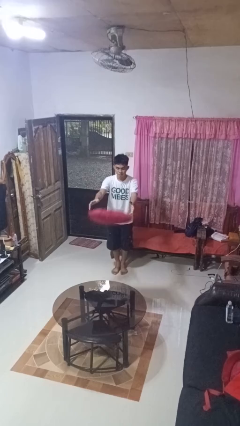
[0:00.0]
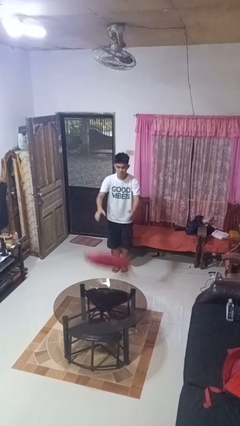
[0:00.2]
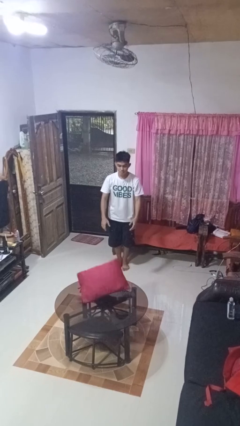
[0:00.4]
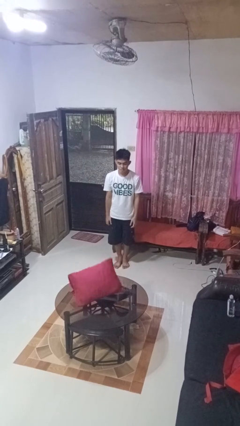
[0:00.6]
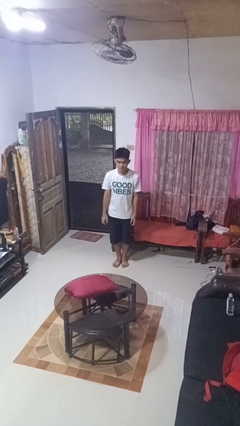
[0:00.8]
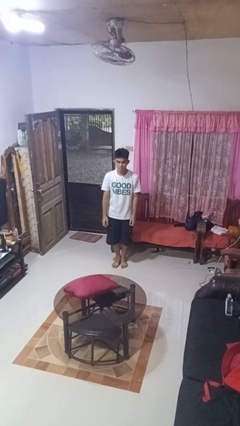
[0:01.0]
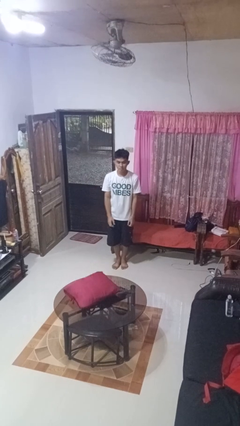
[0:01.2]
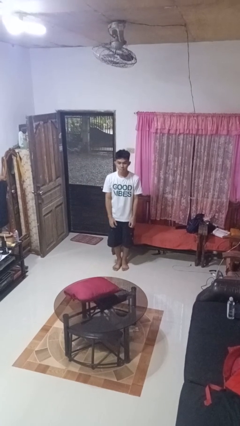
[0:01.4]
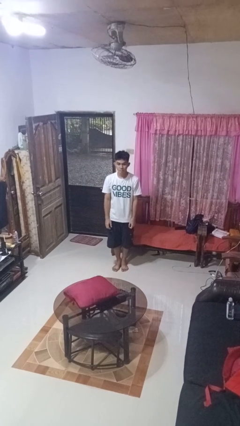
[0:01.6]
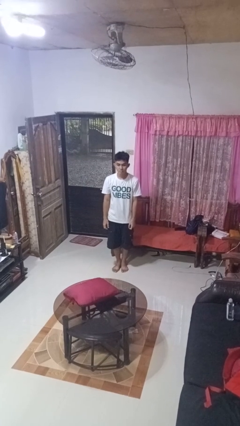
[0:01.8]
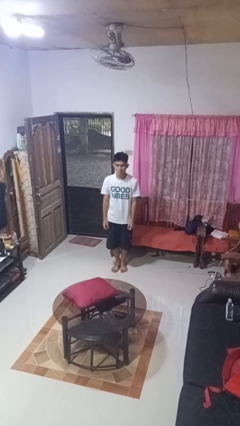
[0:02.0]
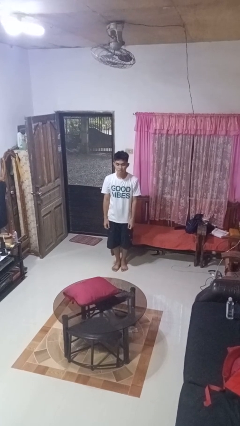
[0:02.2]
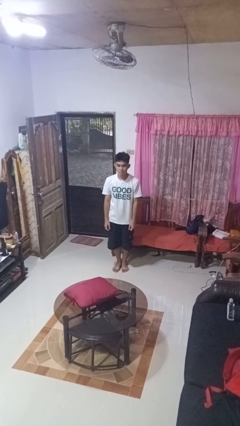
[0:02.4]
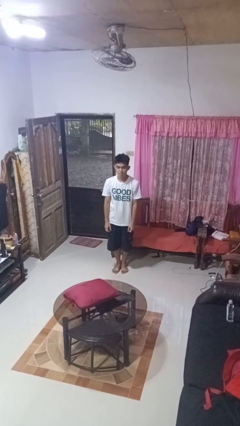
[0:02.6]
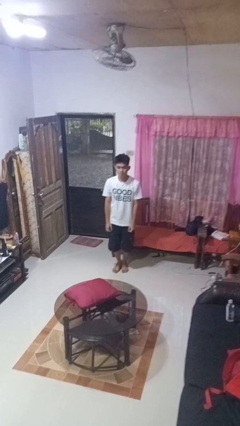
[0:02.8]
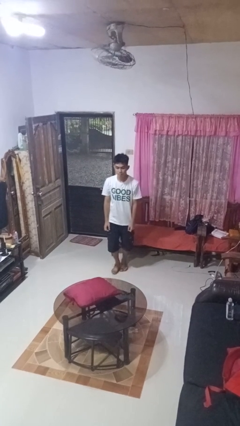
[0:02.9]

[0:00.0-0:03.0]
person throws object on table

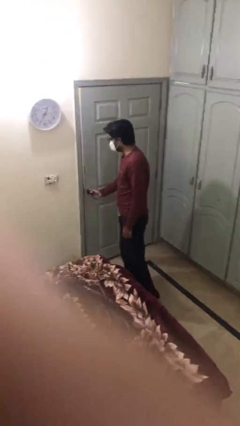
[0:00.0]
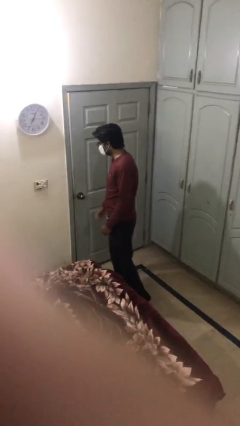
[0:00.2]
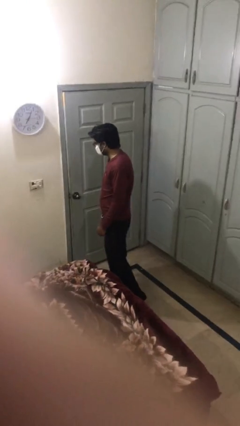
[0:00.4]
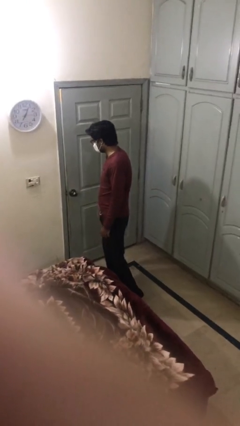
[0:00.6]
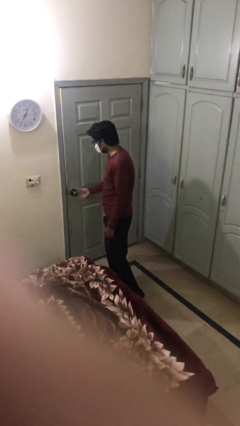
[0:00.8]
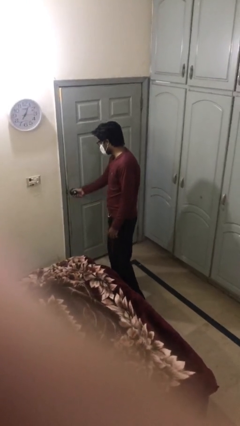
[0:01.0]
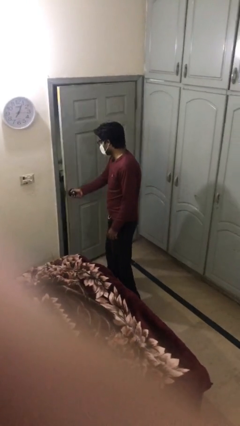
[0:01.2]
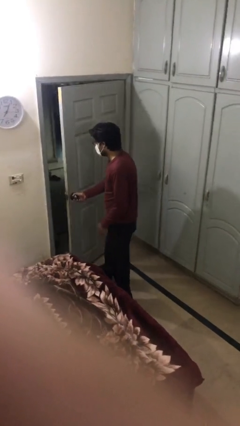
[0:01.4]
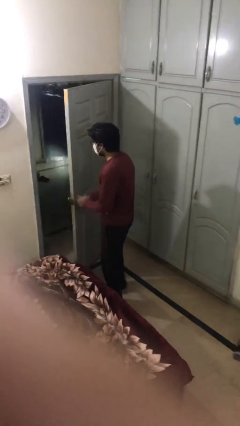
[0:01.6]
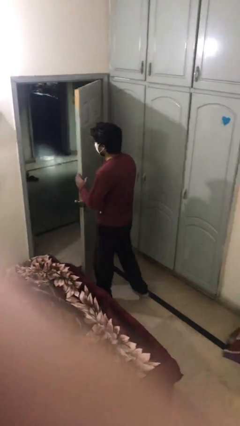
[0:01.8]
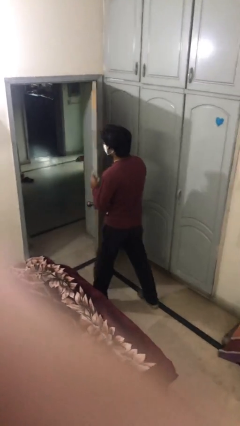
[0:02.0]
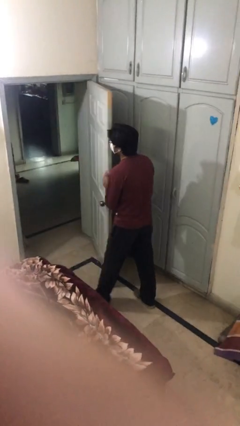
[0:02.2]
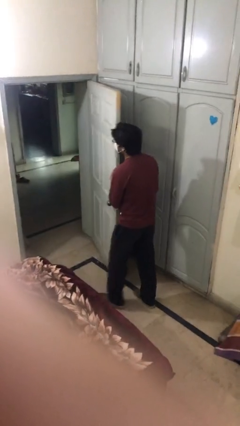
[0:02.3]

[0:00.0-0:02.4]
person opens facility door

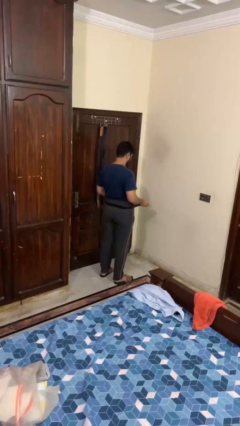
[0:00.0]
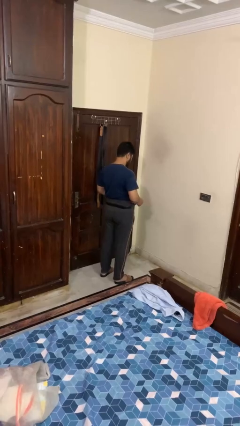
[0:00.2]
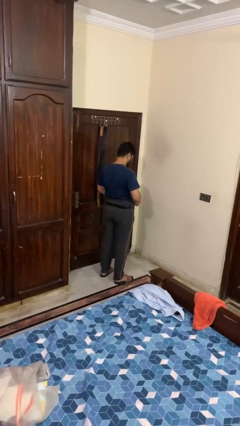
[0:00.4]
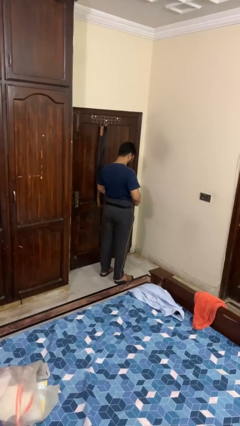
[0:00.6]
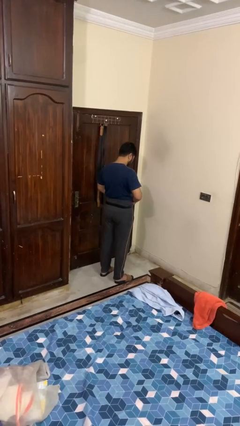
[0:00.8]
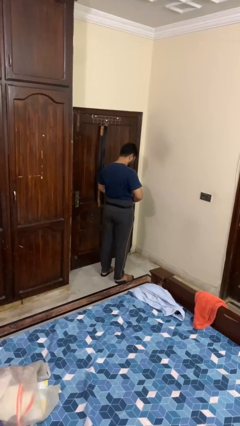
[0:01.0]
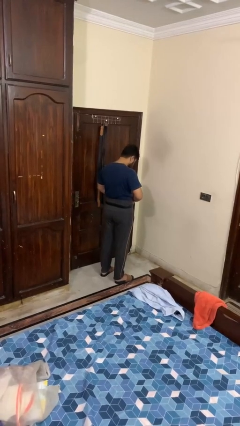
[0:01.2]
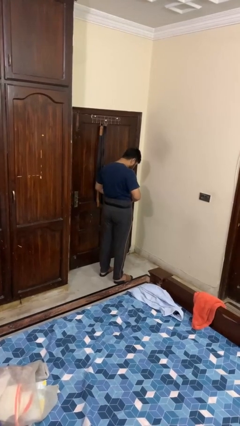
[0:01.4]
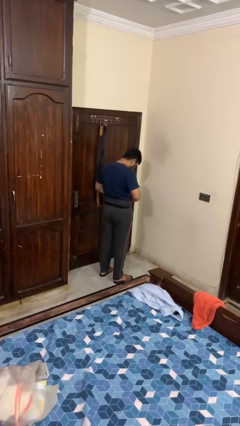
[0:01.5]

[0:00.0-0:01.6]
person puts on belt

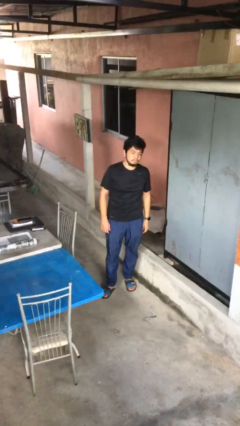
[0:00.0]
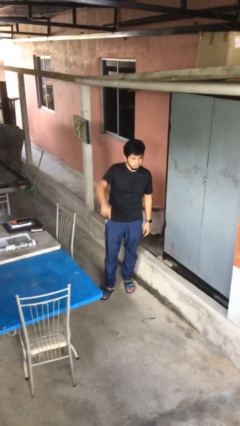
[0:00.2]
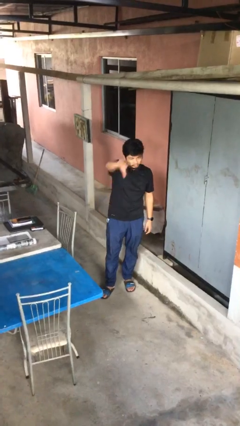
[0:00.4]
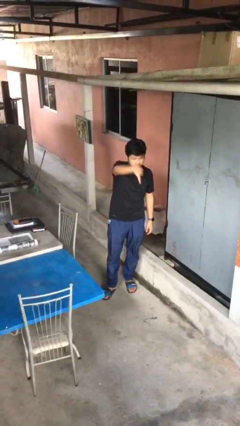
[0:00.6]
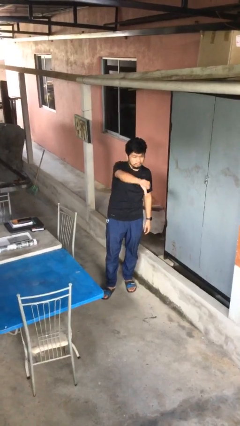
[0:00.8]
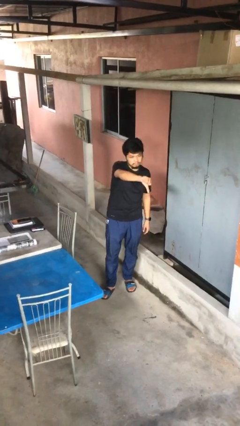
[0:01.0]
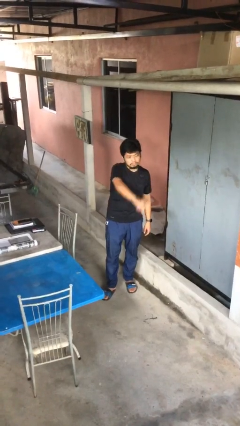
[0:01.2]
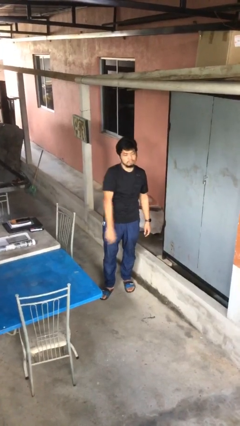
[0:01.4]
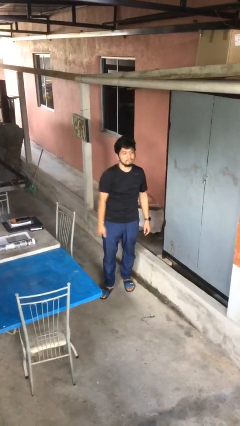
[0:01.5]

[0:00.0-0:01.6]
person gestures thumbs down

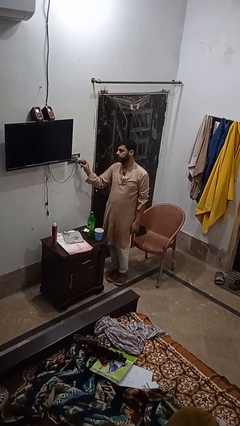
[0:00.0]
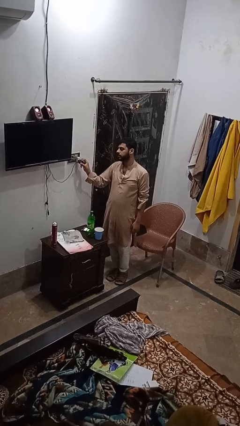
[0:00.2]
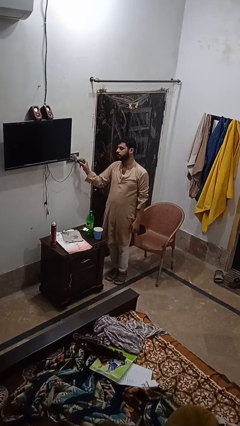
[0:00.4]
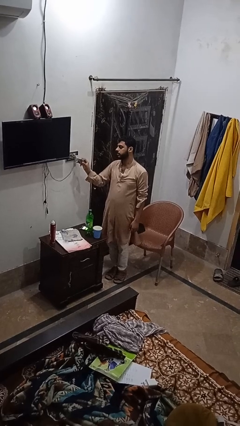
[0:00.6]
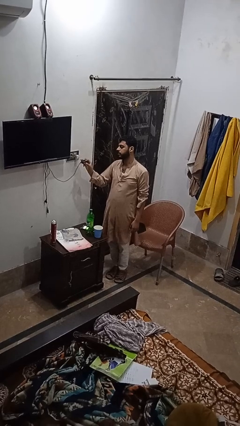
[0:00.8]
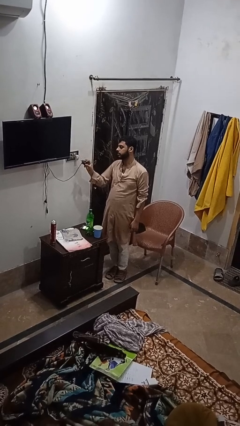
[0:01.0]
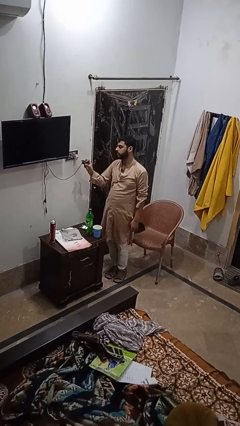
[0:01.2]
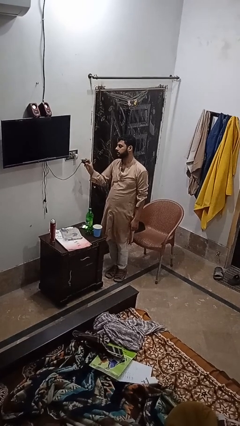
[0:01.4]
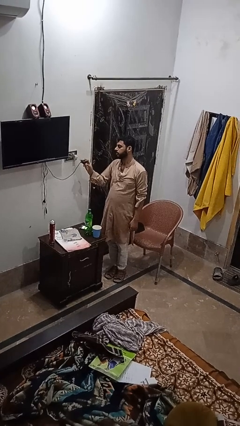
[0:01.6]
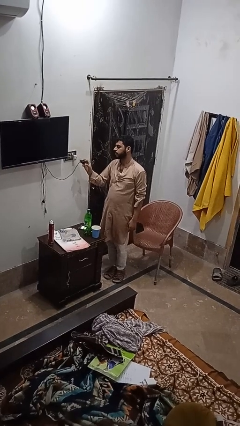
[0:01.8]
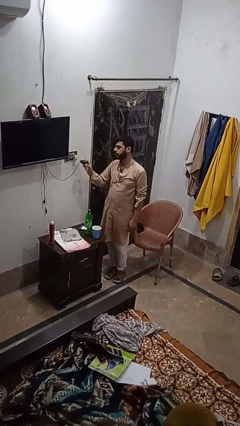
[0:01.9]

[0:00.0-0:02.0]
person unplugs from electrical socket

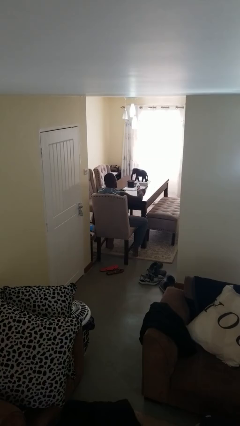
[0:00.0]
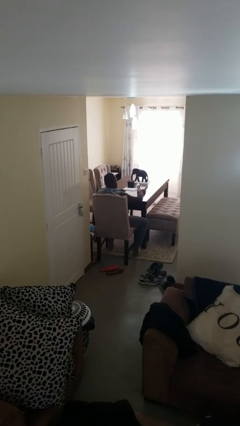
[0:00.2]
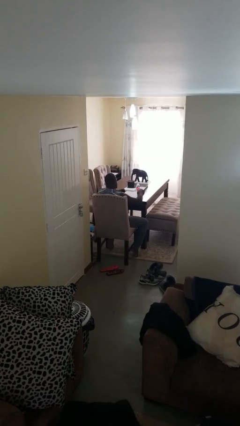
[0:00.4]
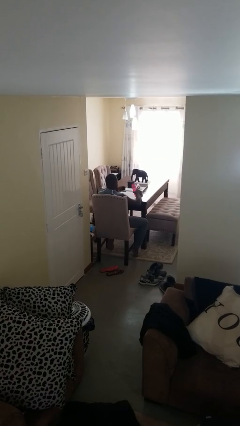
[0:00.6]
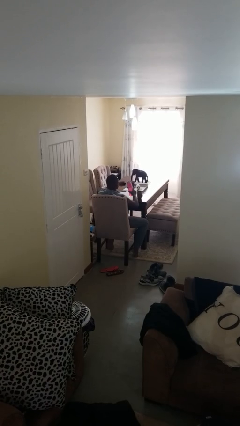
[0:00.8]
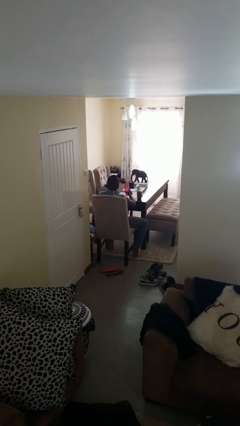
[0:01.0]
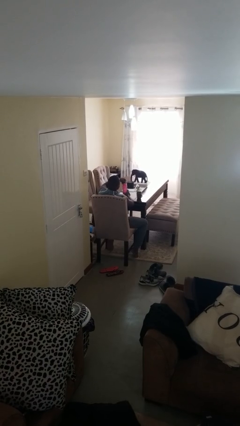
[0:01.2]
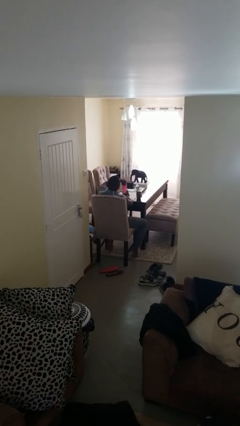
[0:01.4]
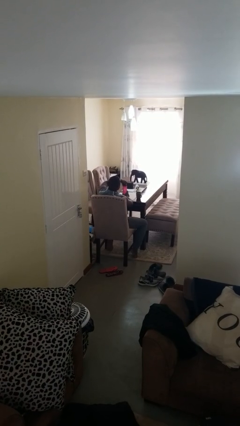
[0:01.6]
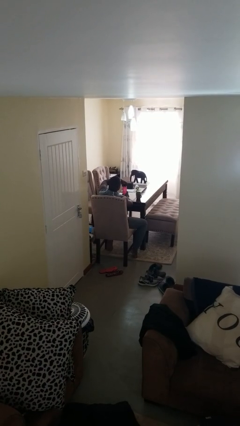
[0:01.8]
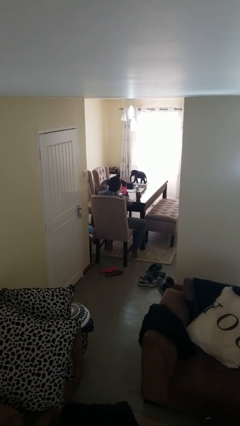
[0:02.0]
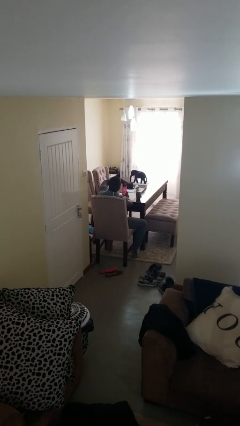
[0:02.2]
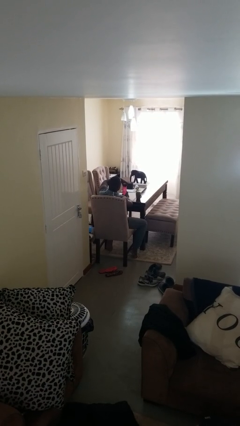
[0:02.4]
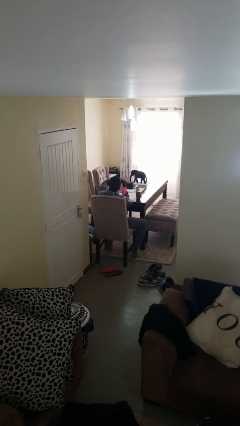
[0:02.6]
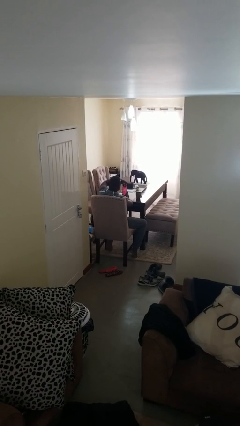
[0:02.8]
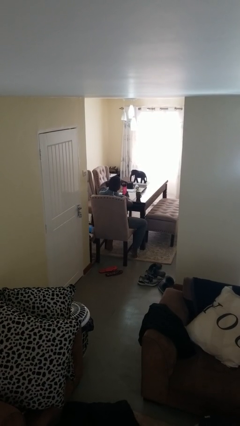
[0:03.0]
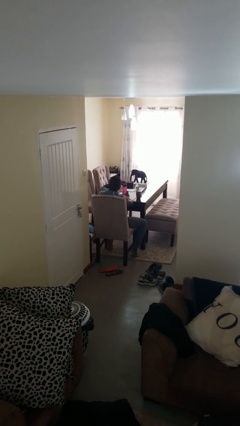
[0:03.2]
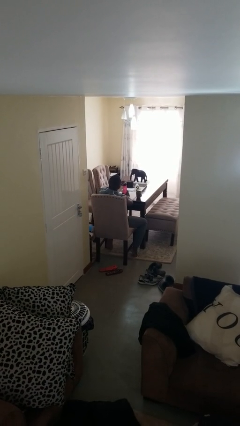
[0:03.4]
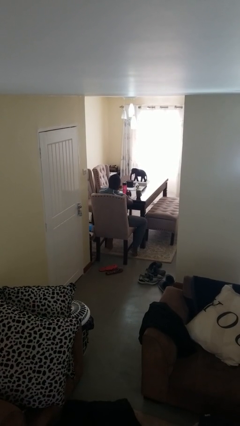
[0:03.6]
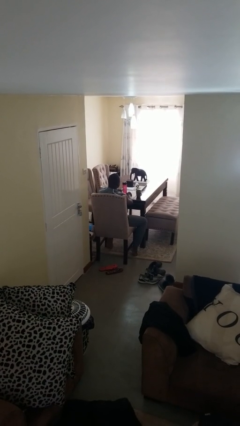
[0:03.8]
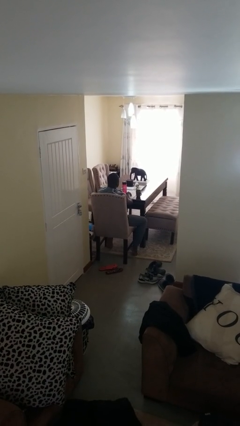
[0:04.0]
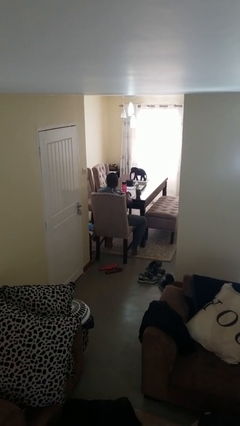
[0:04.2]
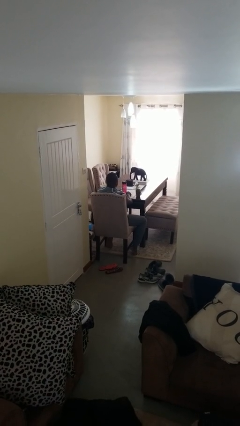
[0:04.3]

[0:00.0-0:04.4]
person screws lid to bottle

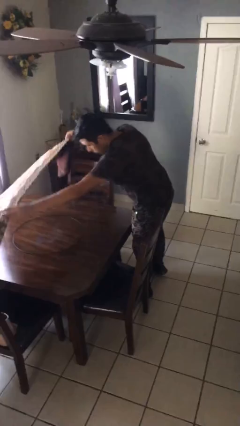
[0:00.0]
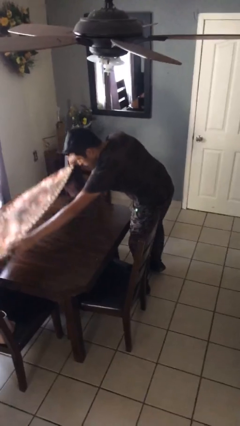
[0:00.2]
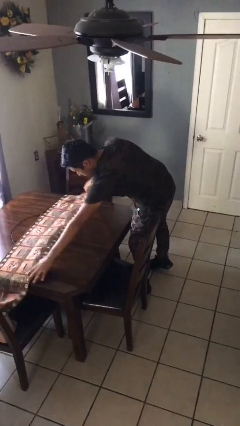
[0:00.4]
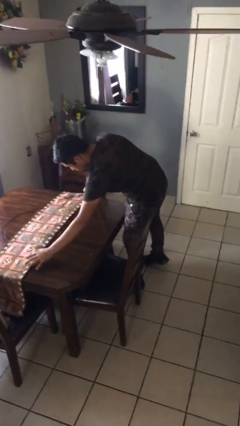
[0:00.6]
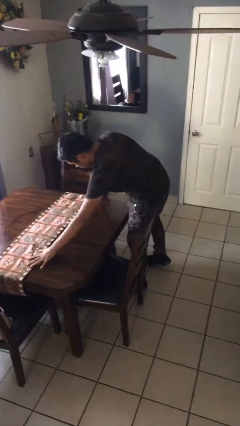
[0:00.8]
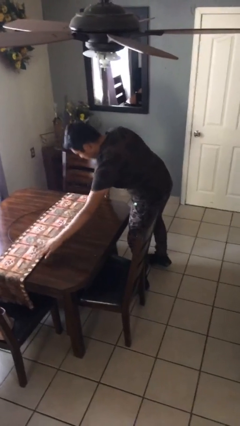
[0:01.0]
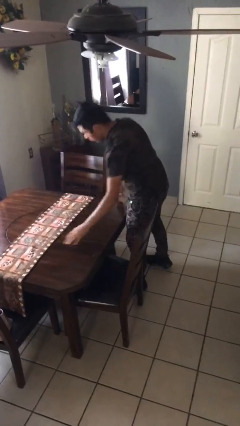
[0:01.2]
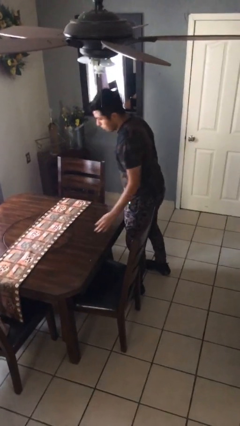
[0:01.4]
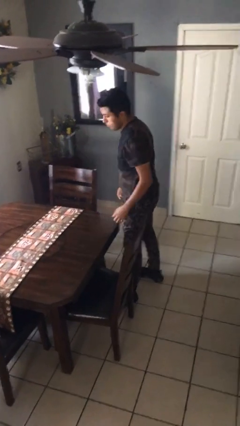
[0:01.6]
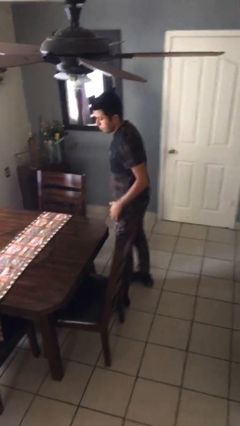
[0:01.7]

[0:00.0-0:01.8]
person spreads tablecloth

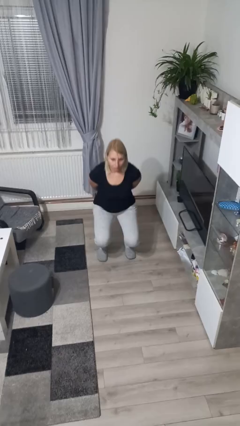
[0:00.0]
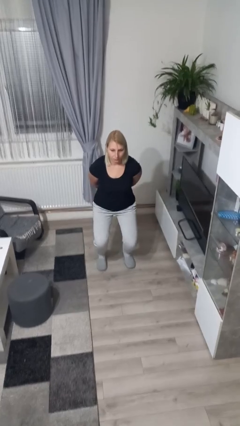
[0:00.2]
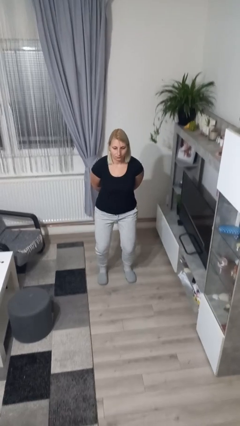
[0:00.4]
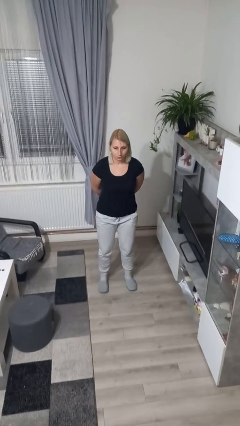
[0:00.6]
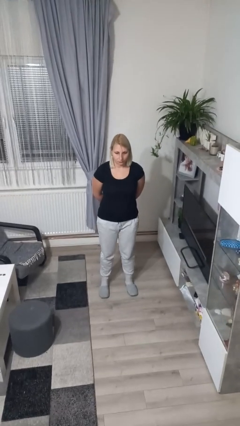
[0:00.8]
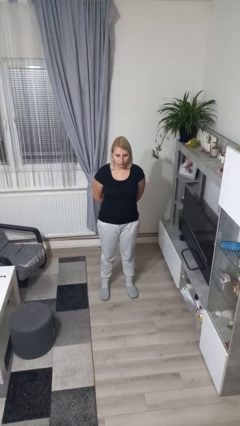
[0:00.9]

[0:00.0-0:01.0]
person stands up
